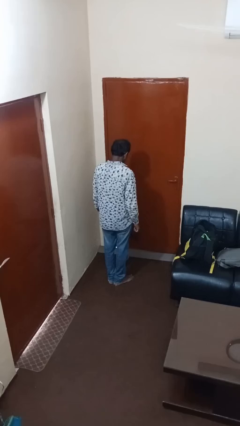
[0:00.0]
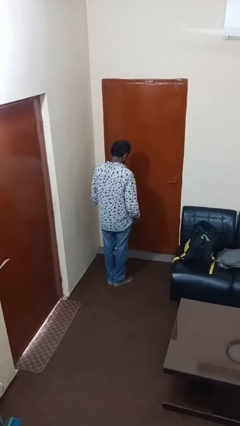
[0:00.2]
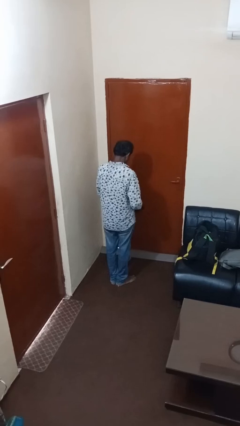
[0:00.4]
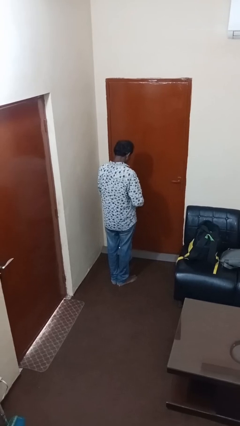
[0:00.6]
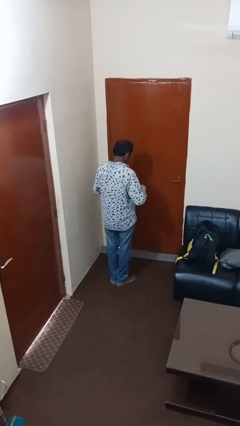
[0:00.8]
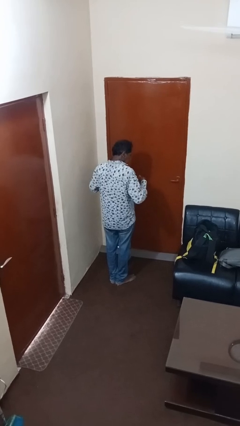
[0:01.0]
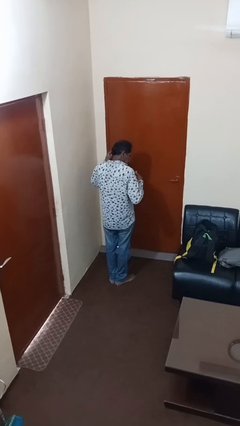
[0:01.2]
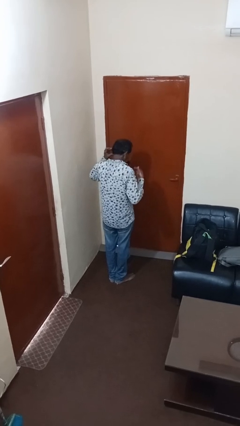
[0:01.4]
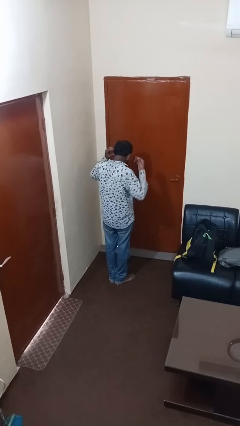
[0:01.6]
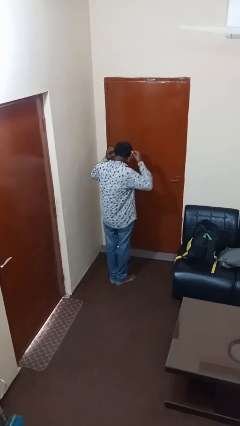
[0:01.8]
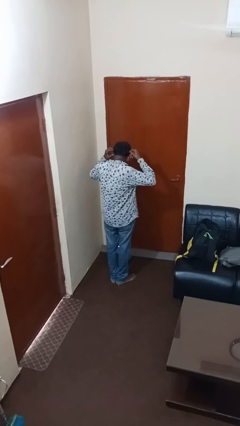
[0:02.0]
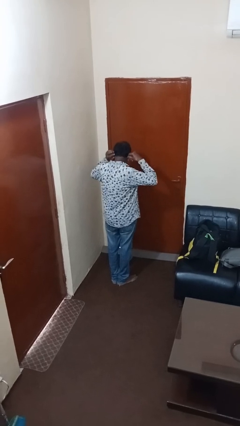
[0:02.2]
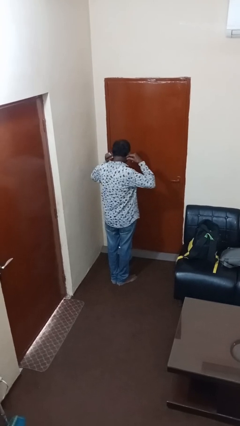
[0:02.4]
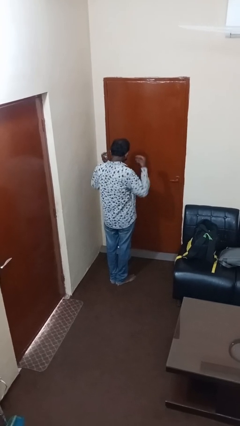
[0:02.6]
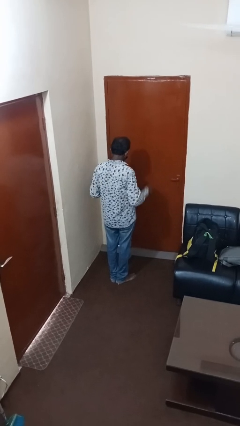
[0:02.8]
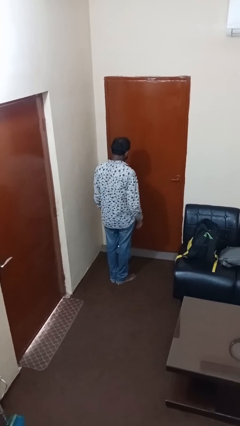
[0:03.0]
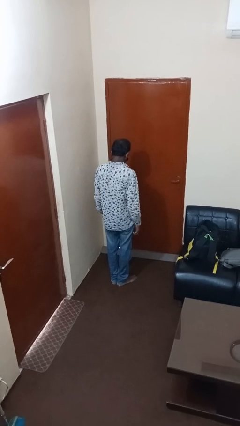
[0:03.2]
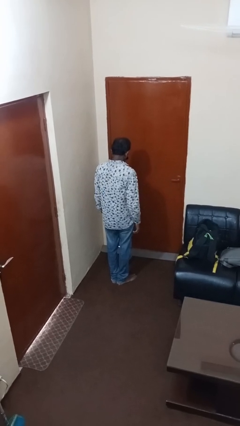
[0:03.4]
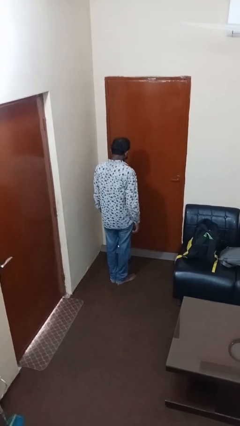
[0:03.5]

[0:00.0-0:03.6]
person puts on facemask

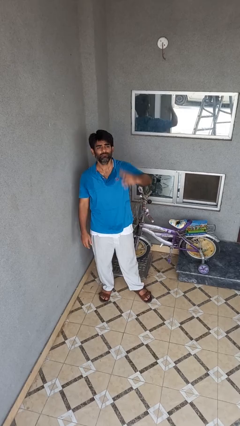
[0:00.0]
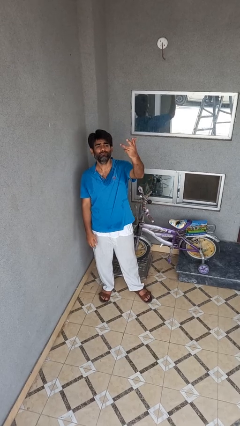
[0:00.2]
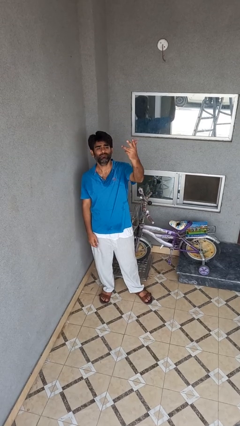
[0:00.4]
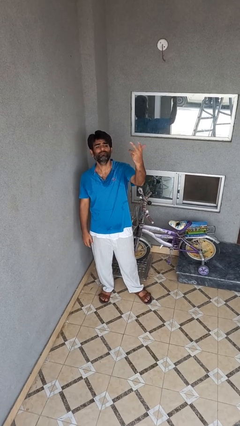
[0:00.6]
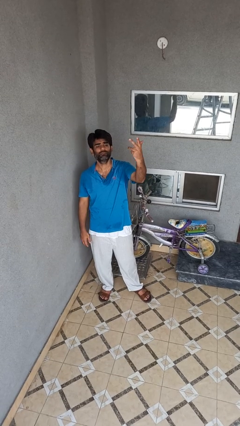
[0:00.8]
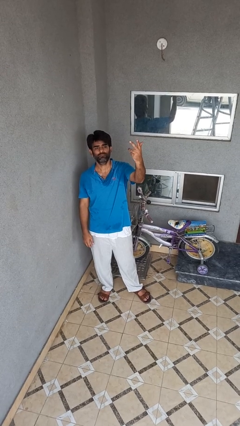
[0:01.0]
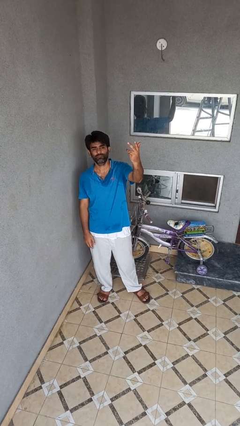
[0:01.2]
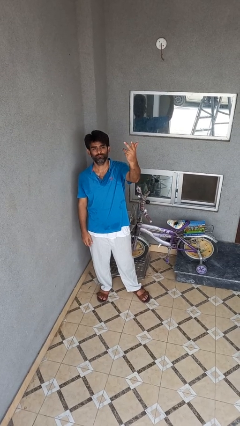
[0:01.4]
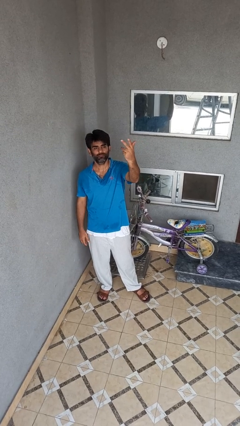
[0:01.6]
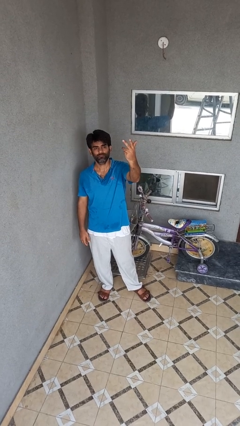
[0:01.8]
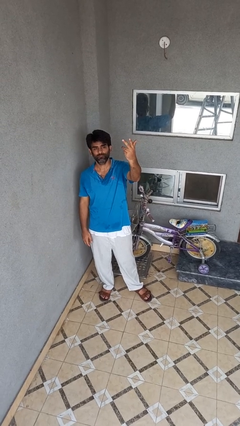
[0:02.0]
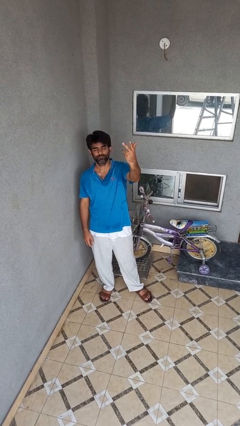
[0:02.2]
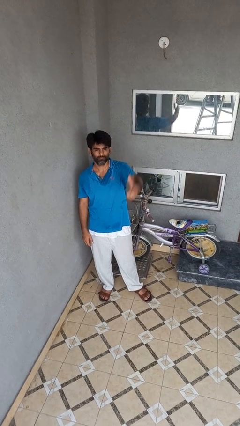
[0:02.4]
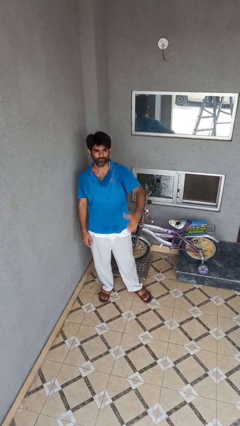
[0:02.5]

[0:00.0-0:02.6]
person gestures raise hand

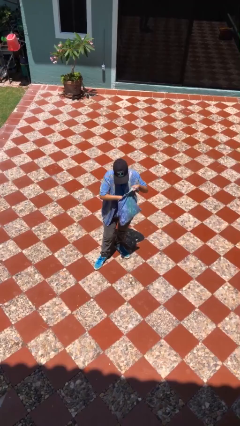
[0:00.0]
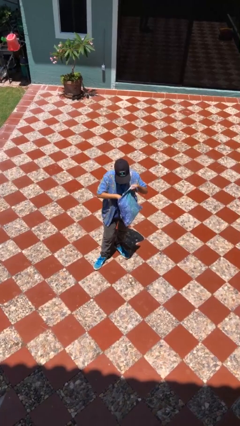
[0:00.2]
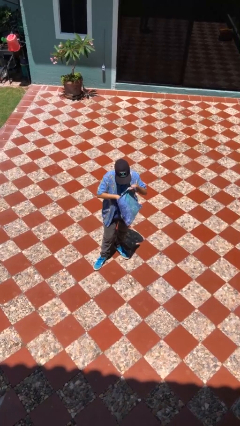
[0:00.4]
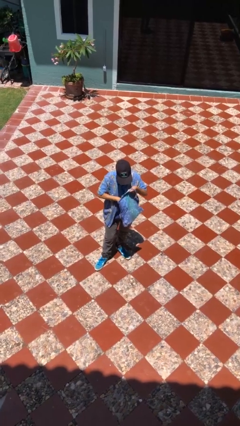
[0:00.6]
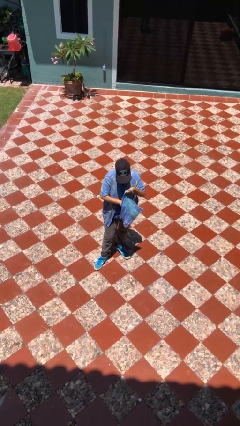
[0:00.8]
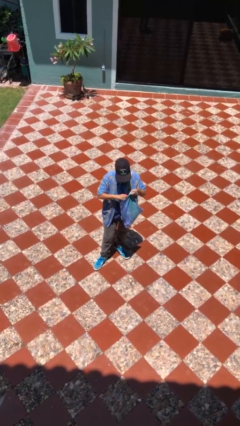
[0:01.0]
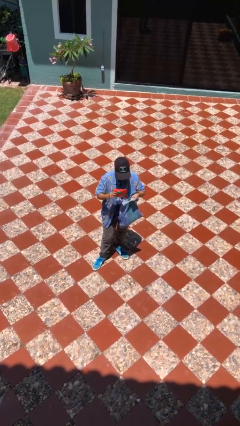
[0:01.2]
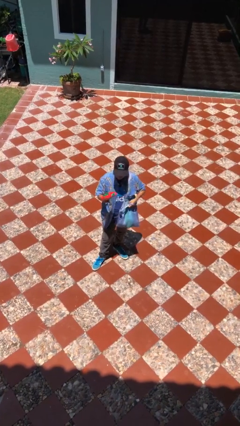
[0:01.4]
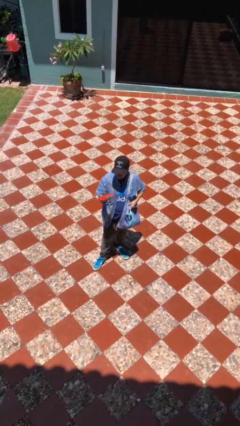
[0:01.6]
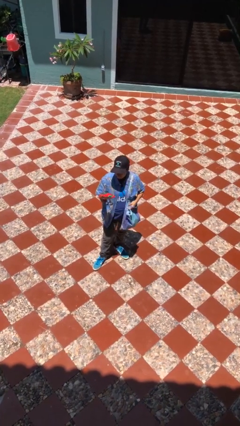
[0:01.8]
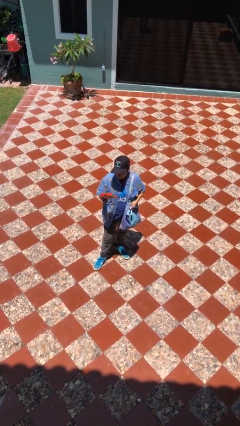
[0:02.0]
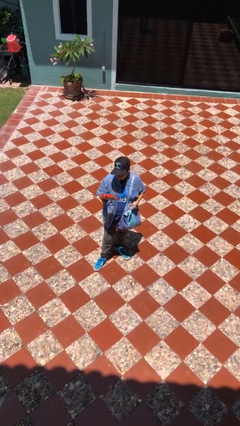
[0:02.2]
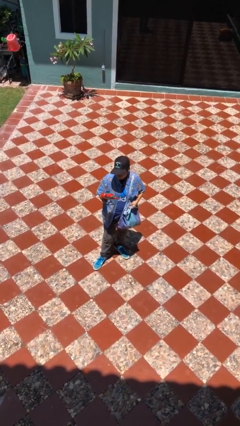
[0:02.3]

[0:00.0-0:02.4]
person takes object from purse

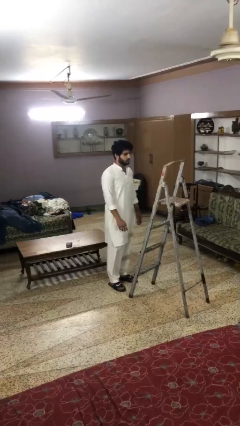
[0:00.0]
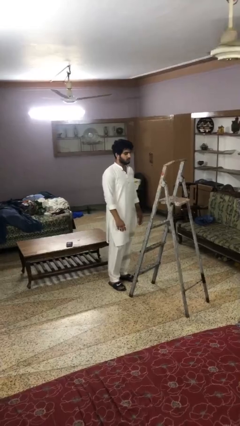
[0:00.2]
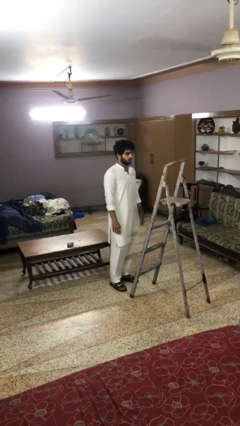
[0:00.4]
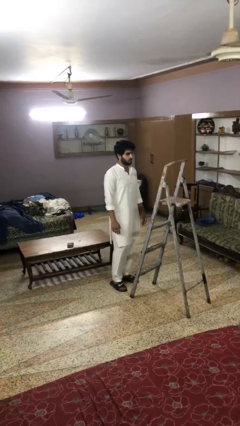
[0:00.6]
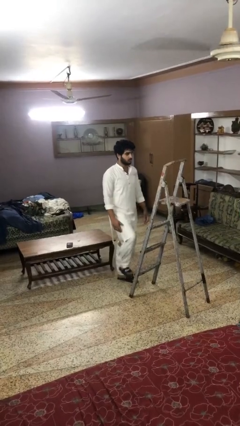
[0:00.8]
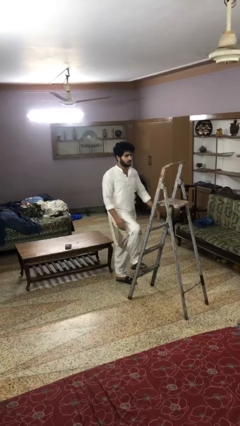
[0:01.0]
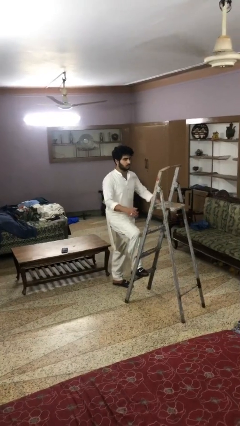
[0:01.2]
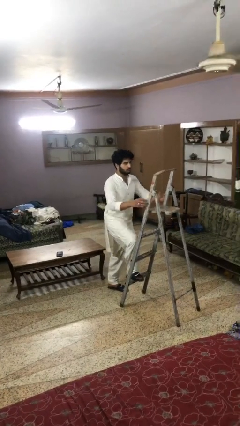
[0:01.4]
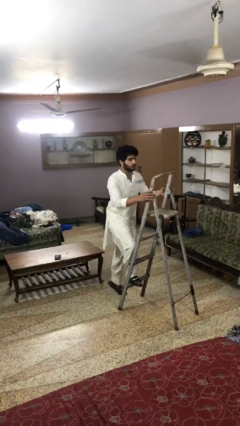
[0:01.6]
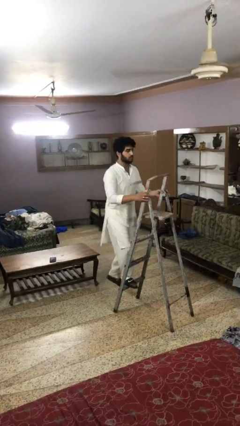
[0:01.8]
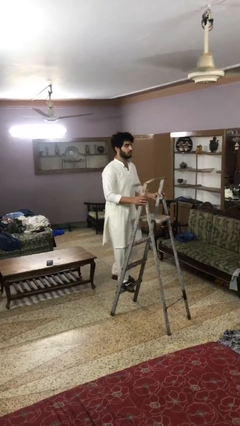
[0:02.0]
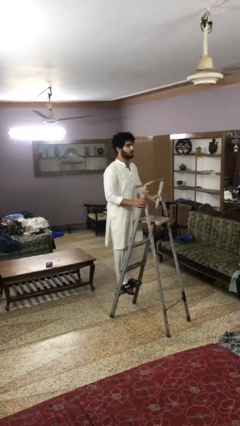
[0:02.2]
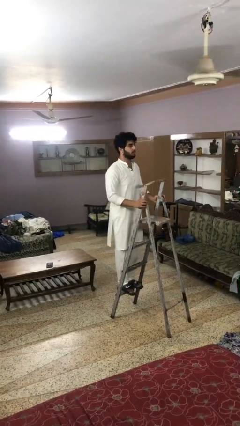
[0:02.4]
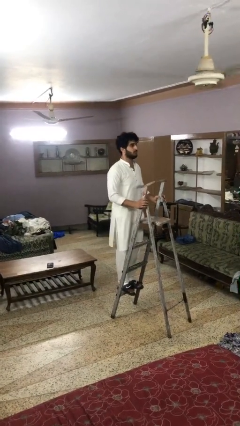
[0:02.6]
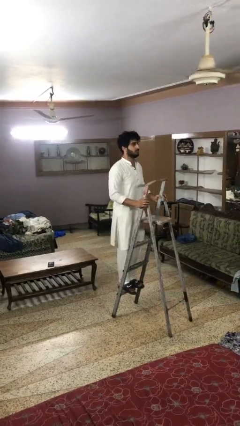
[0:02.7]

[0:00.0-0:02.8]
person climbs up ladder

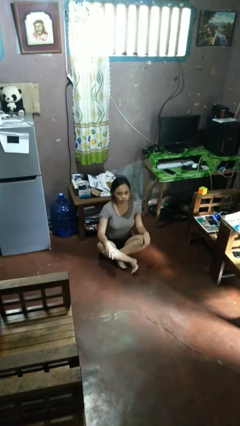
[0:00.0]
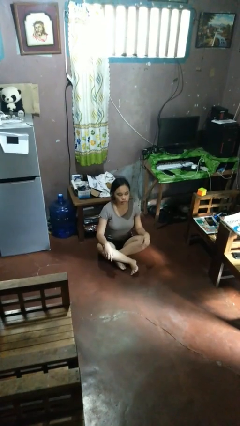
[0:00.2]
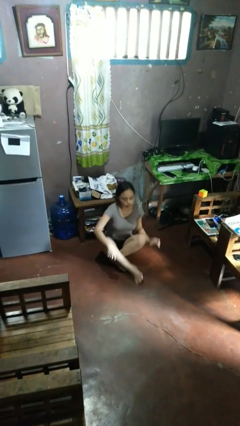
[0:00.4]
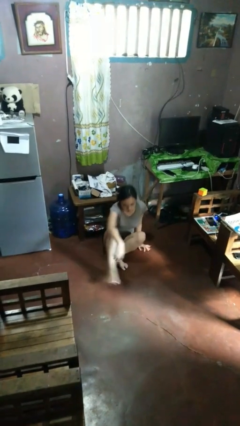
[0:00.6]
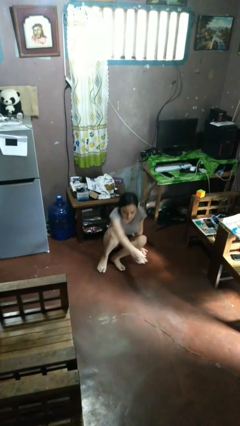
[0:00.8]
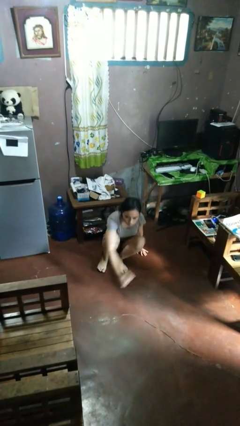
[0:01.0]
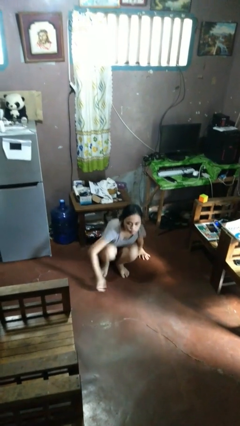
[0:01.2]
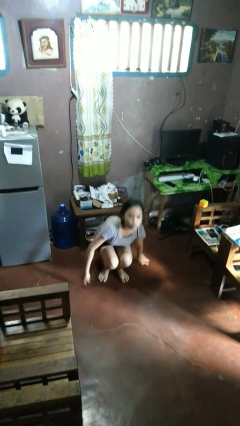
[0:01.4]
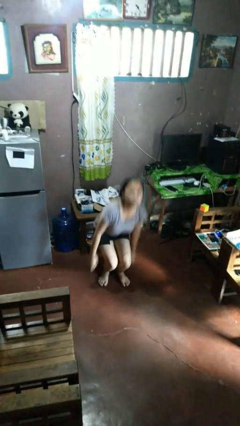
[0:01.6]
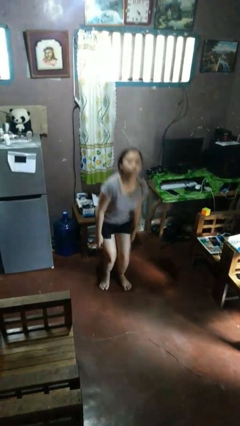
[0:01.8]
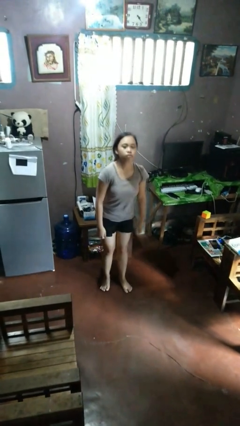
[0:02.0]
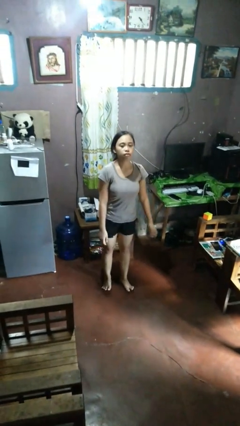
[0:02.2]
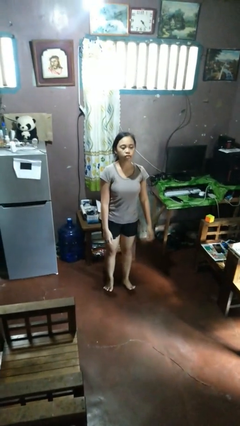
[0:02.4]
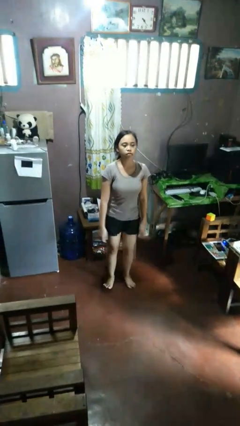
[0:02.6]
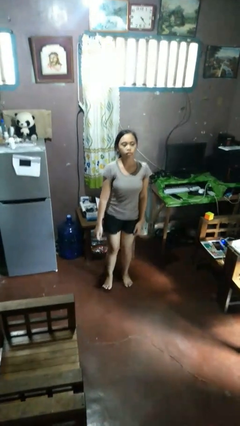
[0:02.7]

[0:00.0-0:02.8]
person stands up from floor

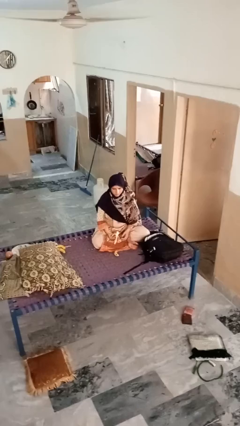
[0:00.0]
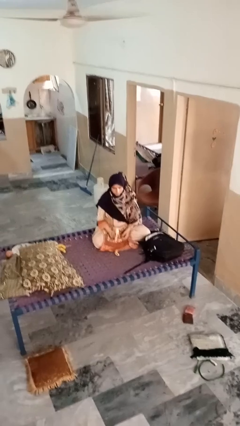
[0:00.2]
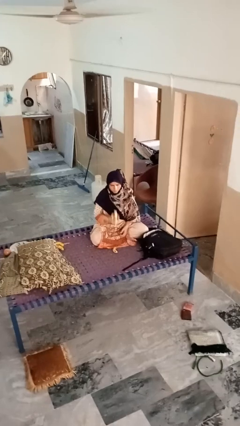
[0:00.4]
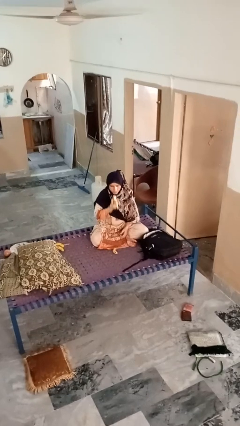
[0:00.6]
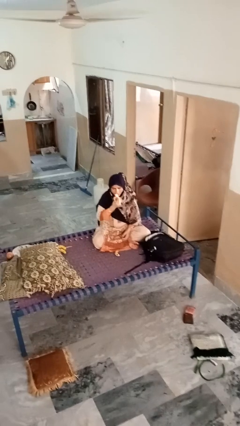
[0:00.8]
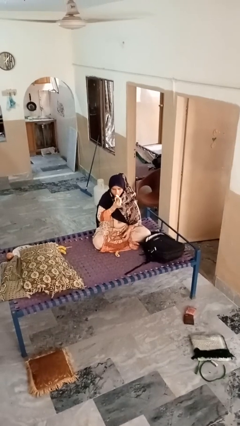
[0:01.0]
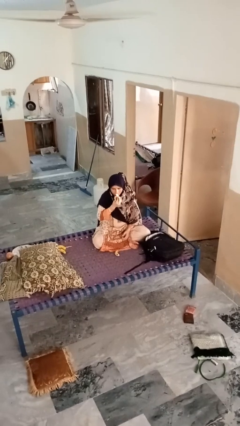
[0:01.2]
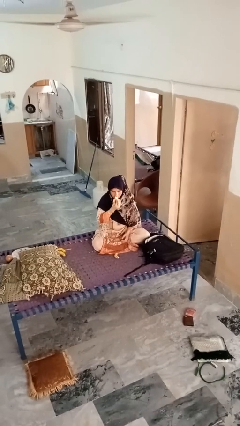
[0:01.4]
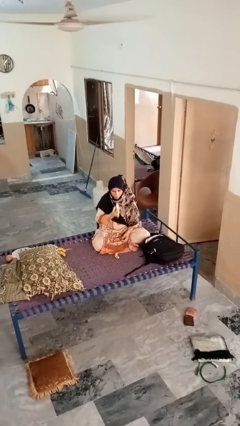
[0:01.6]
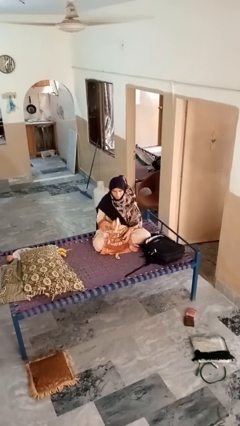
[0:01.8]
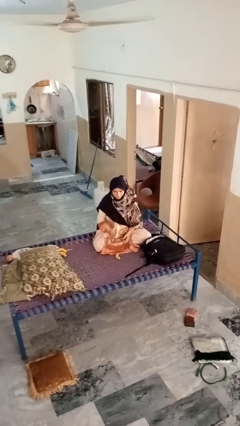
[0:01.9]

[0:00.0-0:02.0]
person eats banana

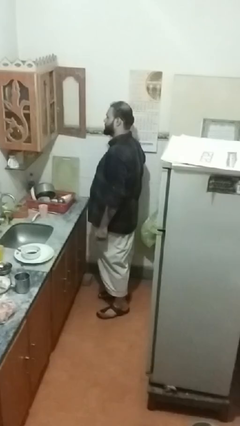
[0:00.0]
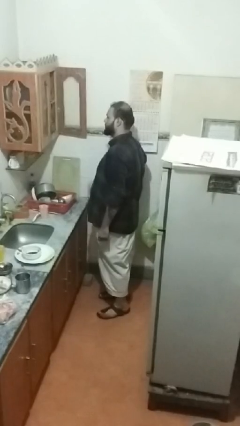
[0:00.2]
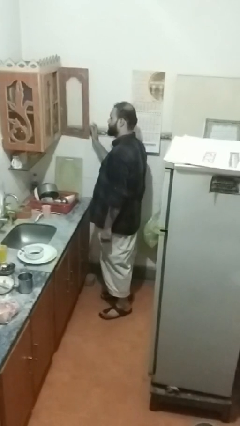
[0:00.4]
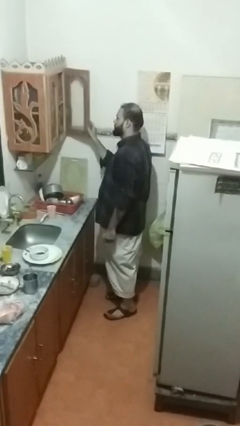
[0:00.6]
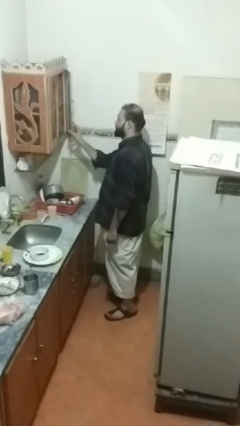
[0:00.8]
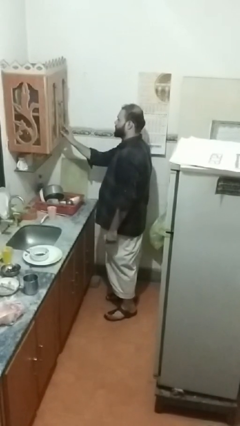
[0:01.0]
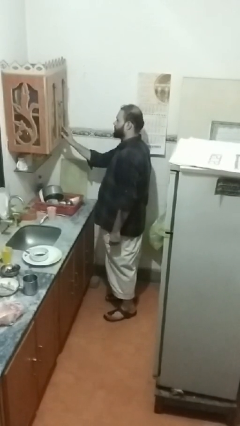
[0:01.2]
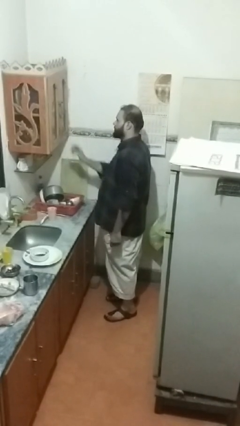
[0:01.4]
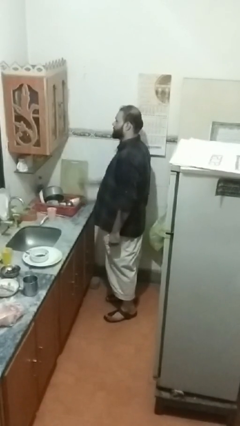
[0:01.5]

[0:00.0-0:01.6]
person closes cabinet
